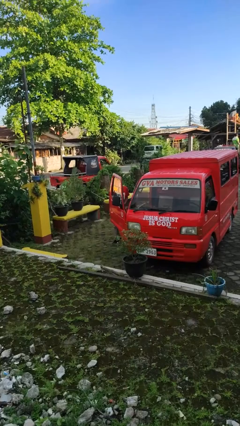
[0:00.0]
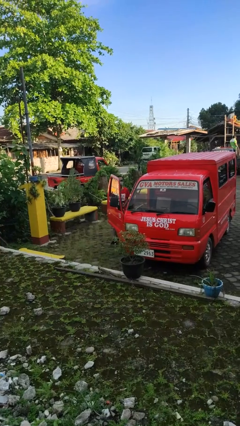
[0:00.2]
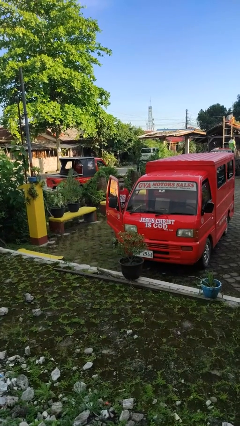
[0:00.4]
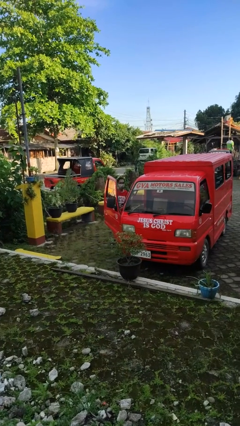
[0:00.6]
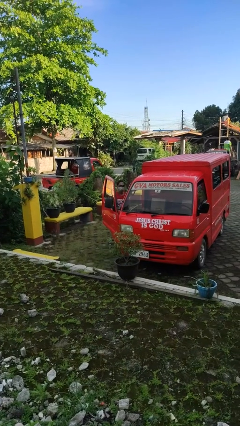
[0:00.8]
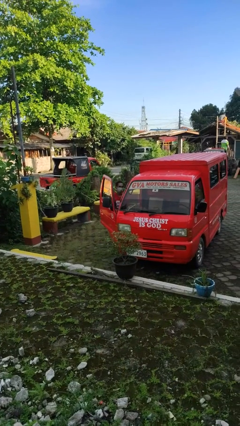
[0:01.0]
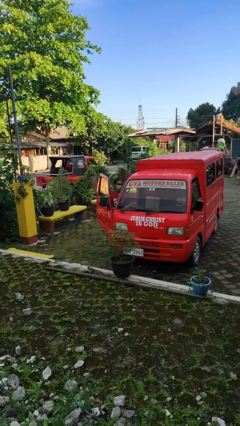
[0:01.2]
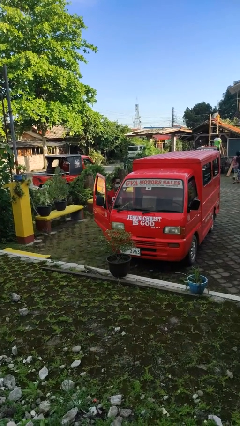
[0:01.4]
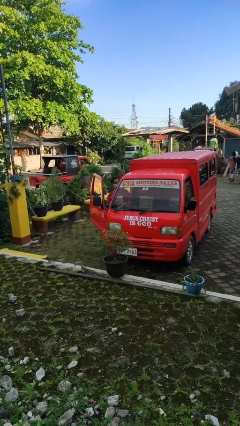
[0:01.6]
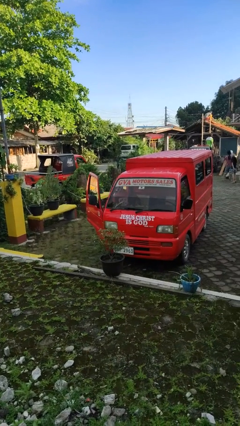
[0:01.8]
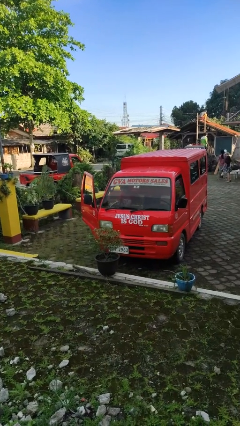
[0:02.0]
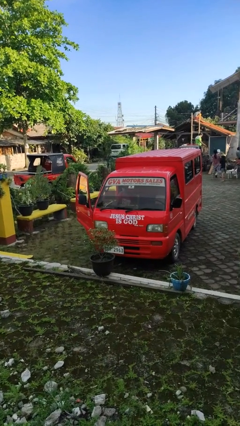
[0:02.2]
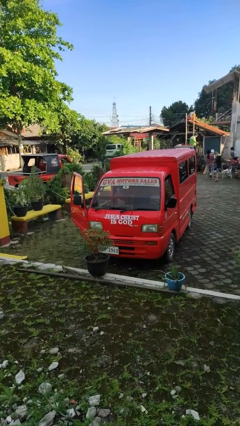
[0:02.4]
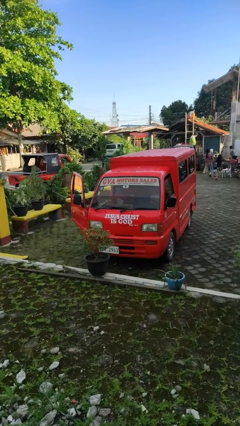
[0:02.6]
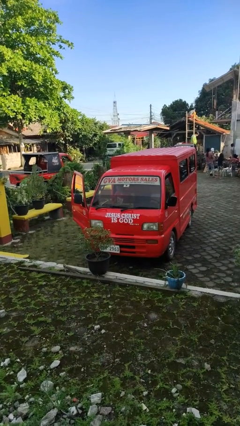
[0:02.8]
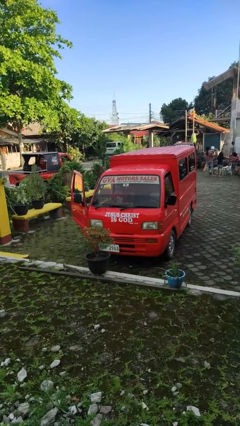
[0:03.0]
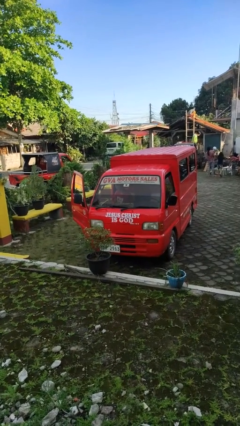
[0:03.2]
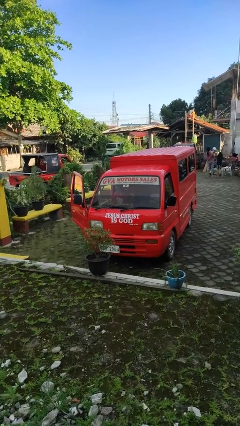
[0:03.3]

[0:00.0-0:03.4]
person enters car

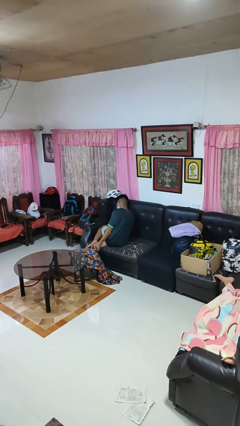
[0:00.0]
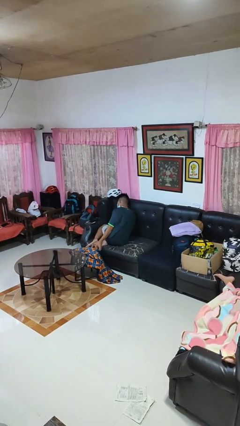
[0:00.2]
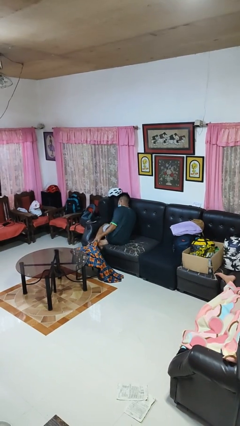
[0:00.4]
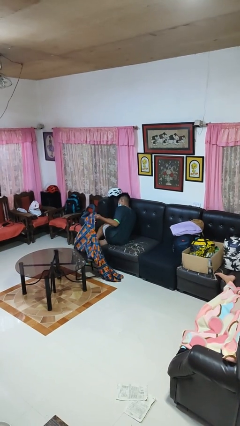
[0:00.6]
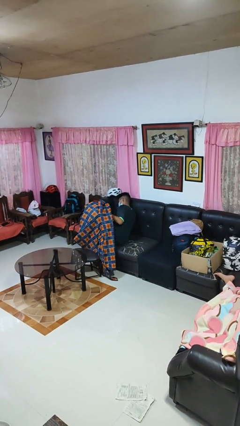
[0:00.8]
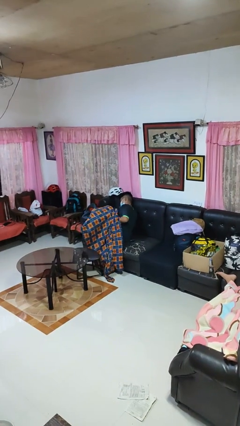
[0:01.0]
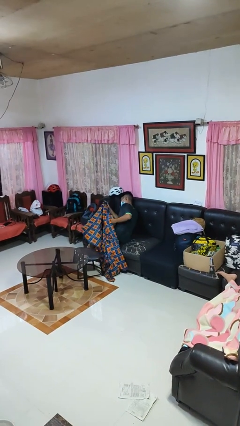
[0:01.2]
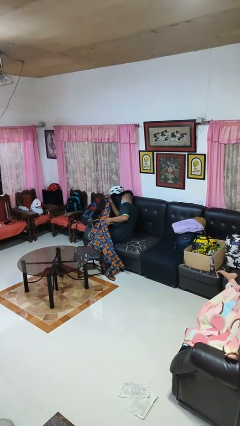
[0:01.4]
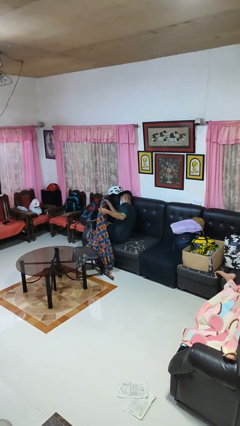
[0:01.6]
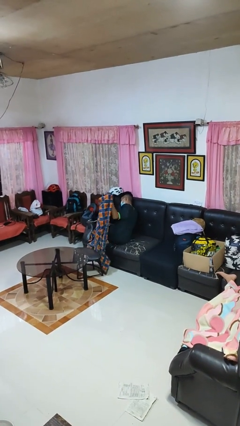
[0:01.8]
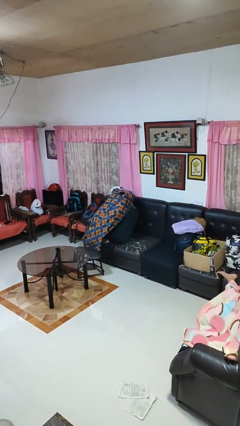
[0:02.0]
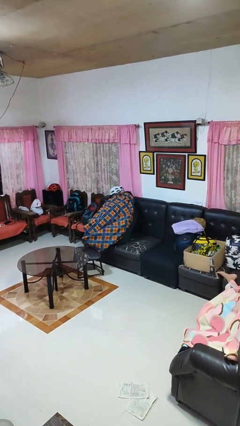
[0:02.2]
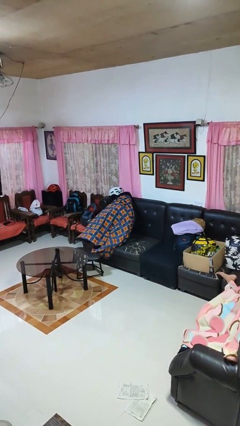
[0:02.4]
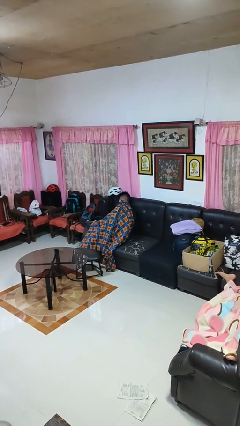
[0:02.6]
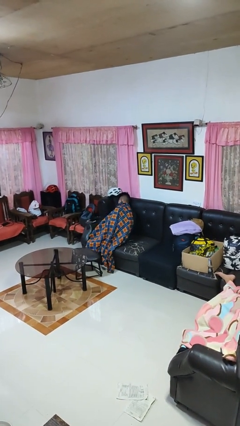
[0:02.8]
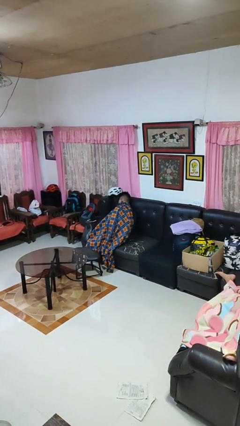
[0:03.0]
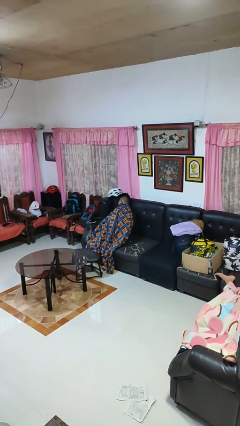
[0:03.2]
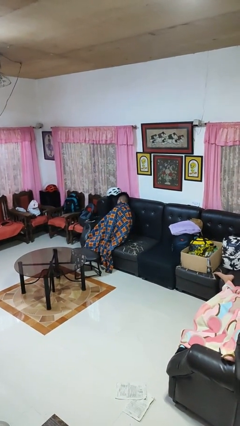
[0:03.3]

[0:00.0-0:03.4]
person covers with blanket

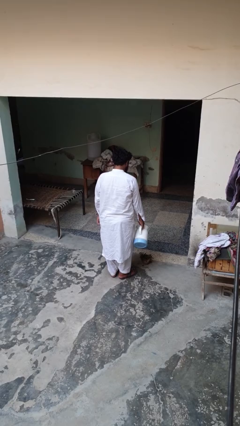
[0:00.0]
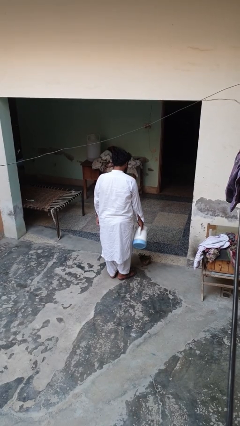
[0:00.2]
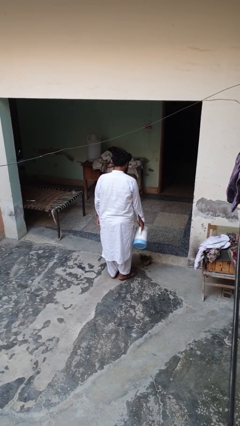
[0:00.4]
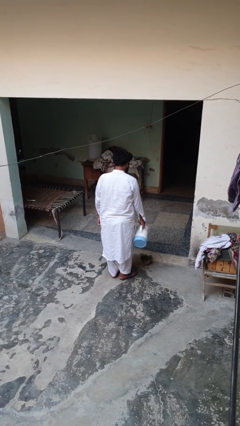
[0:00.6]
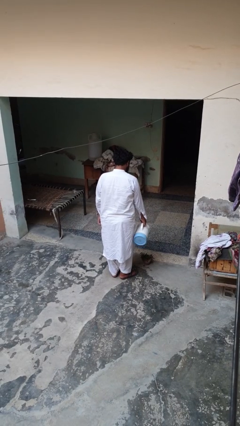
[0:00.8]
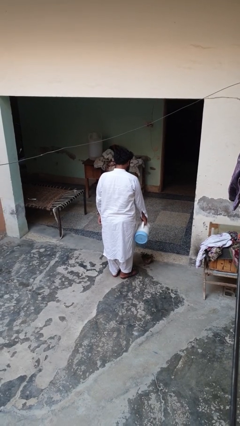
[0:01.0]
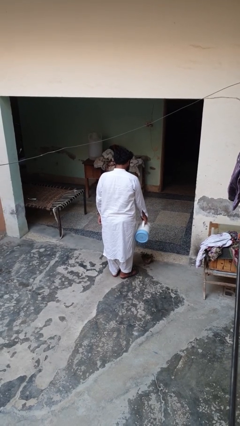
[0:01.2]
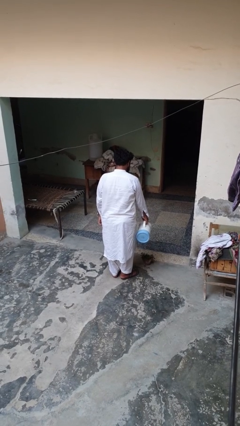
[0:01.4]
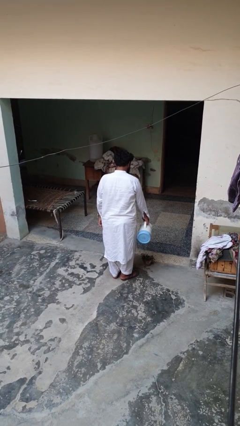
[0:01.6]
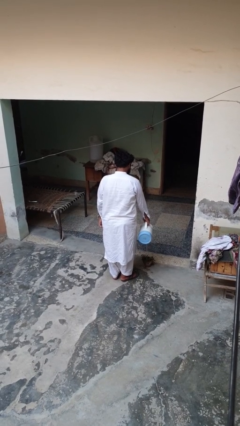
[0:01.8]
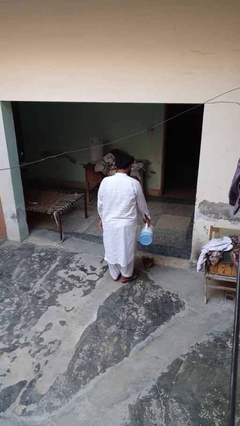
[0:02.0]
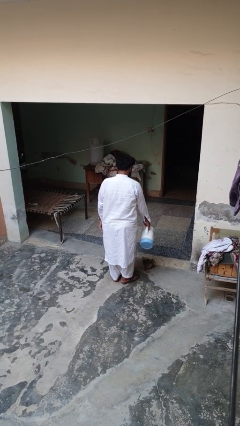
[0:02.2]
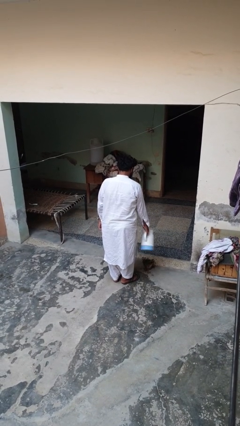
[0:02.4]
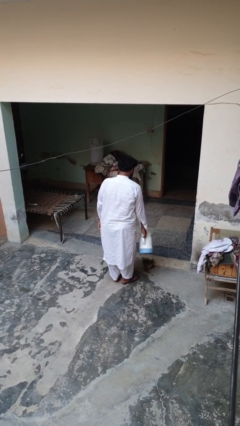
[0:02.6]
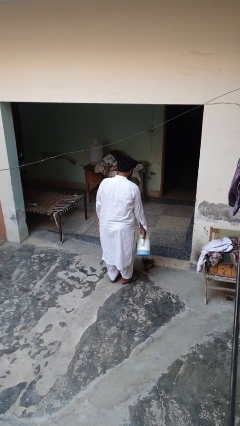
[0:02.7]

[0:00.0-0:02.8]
person waters houseplant

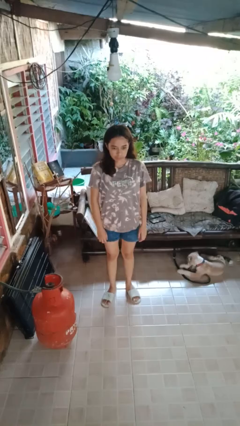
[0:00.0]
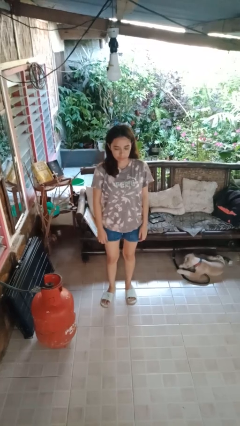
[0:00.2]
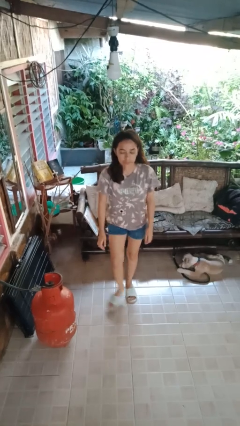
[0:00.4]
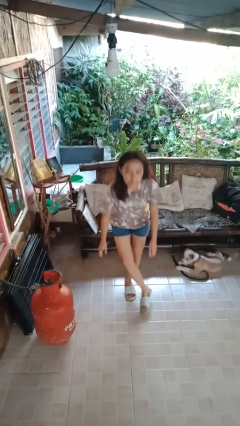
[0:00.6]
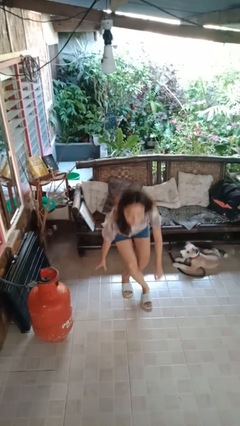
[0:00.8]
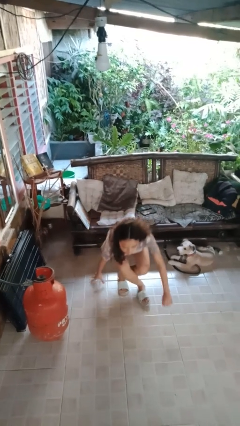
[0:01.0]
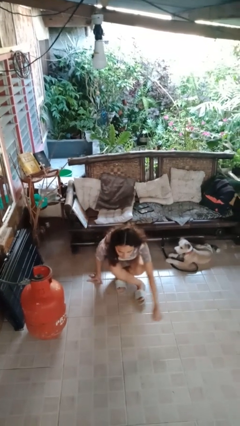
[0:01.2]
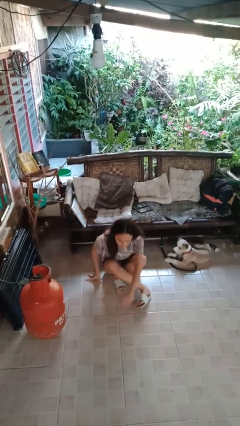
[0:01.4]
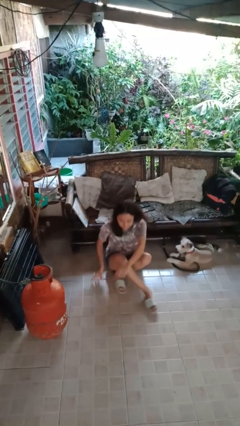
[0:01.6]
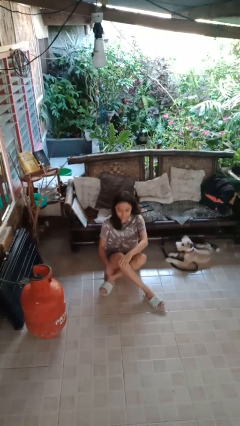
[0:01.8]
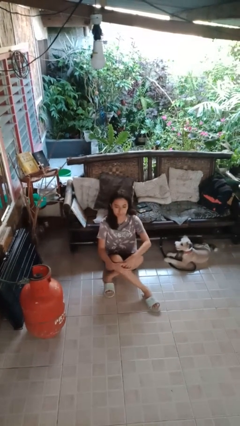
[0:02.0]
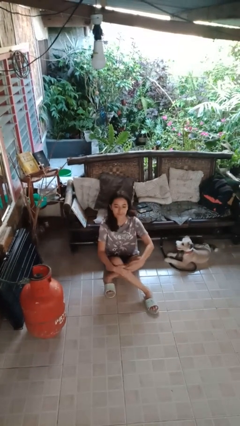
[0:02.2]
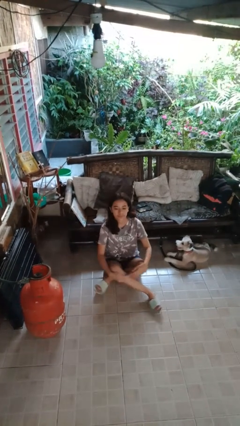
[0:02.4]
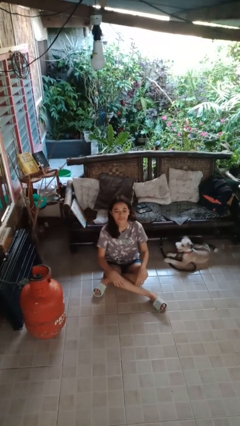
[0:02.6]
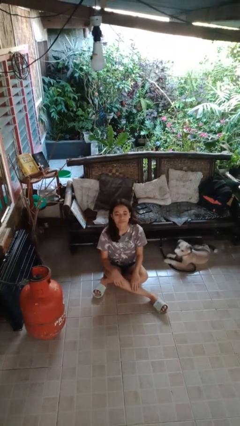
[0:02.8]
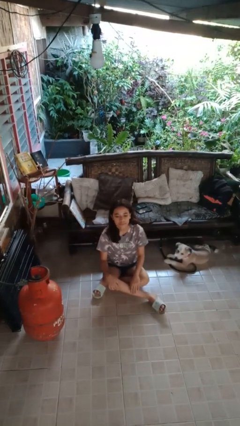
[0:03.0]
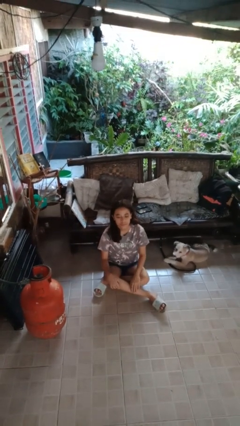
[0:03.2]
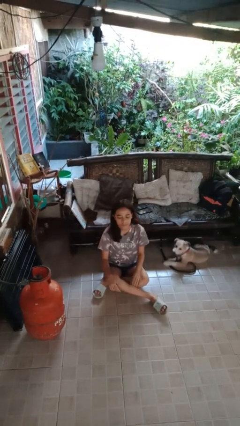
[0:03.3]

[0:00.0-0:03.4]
person sits crisscross

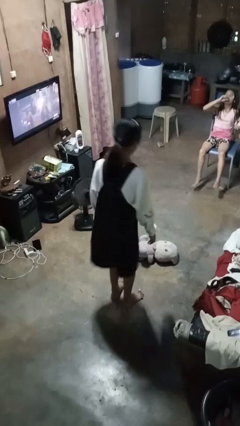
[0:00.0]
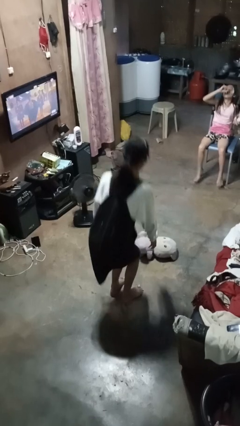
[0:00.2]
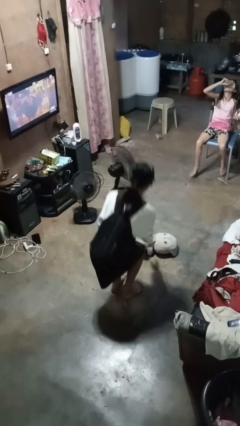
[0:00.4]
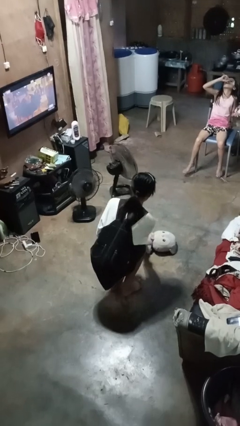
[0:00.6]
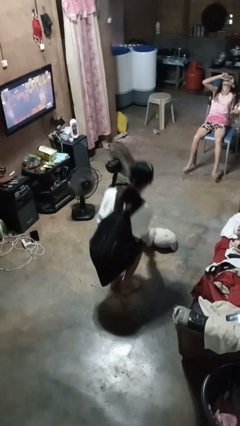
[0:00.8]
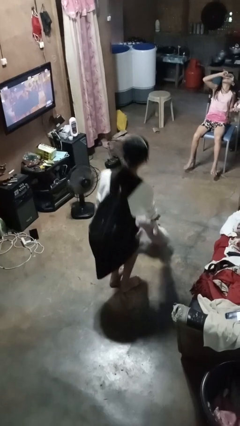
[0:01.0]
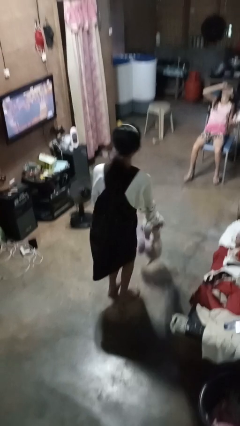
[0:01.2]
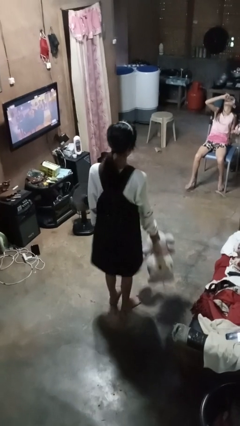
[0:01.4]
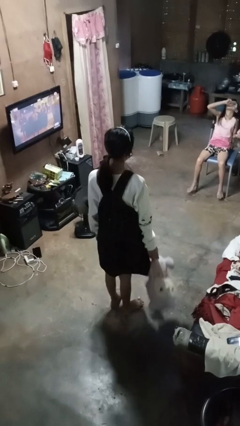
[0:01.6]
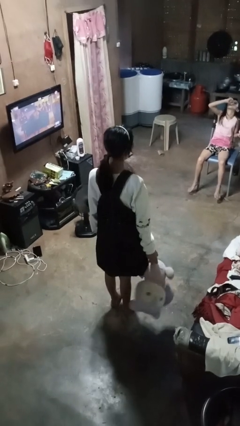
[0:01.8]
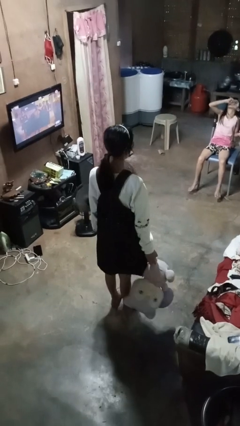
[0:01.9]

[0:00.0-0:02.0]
person picks up object from floor

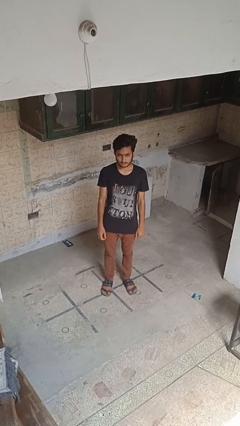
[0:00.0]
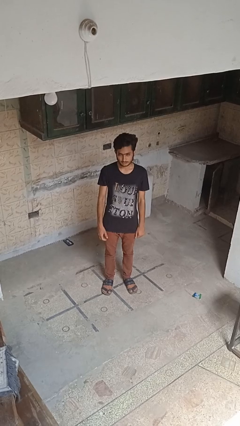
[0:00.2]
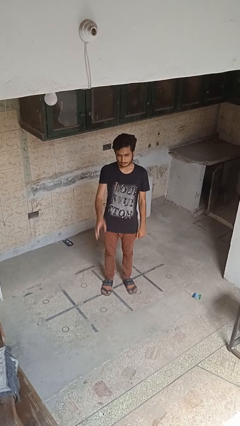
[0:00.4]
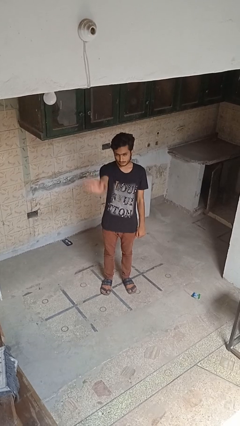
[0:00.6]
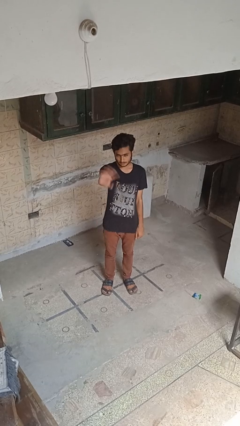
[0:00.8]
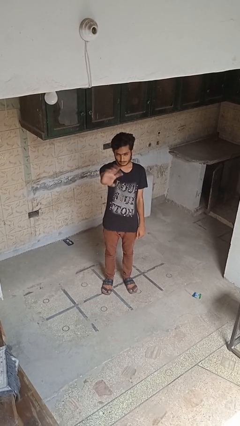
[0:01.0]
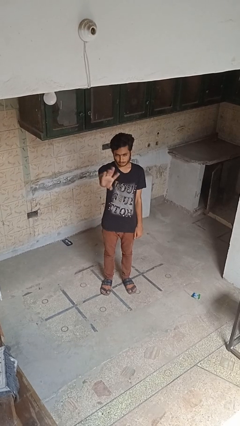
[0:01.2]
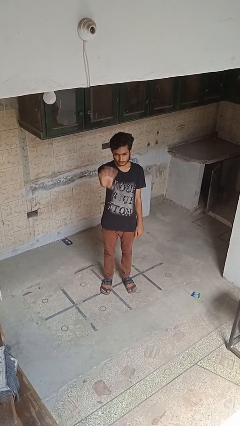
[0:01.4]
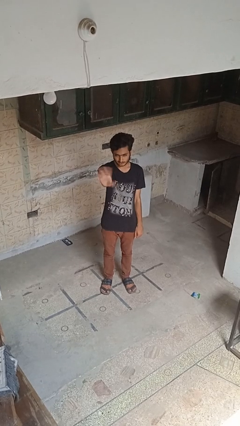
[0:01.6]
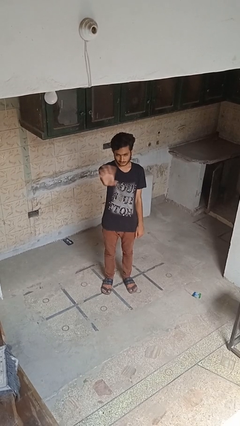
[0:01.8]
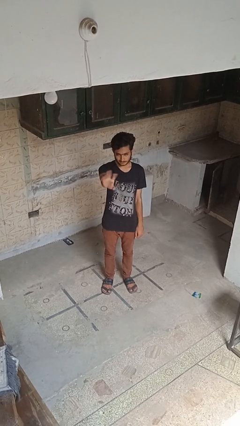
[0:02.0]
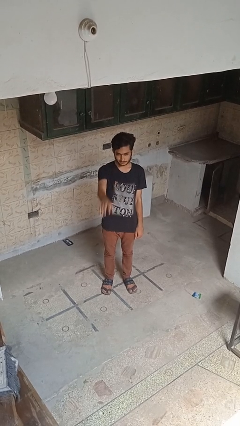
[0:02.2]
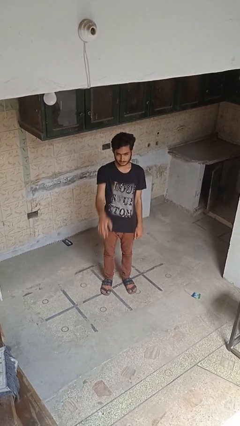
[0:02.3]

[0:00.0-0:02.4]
person waves at person
